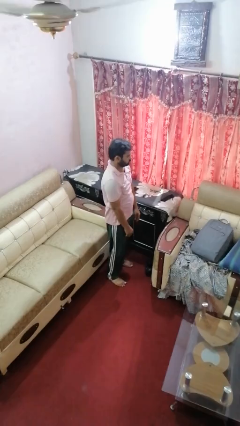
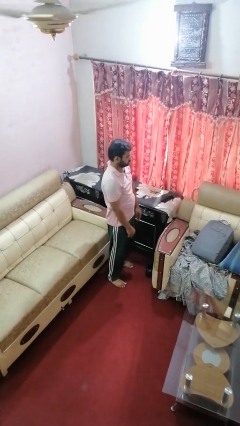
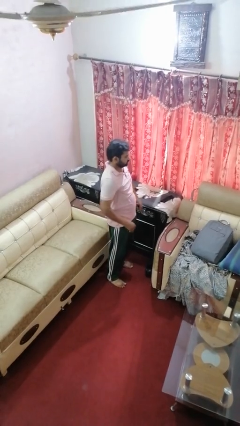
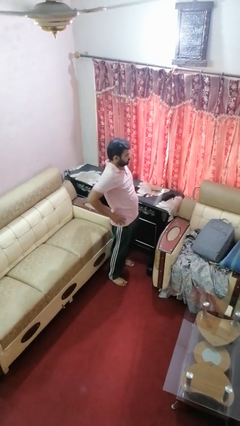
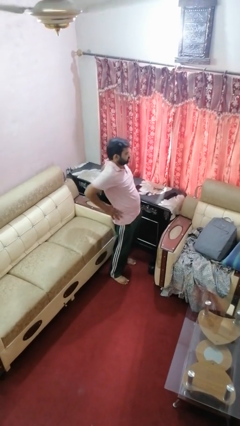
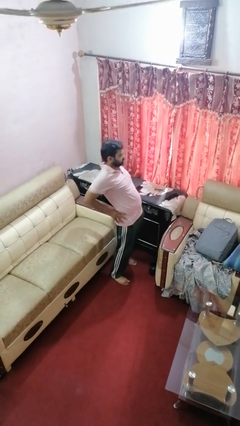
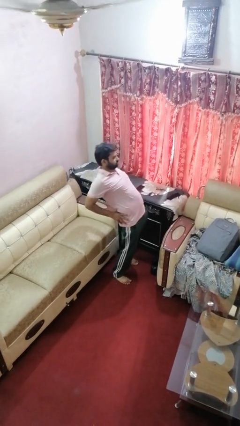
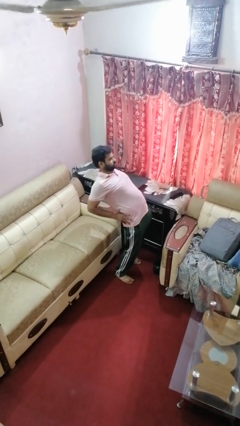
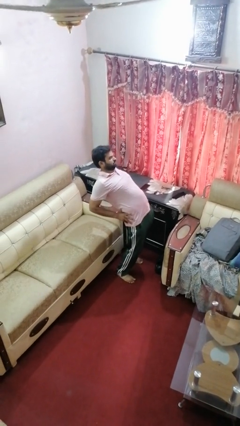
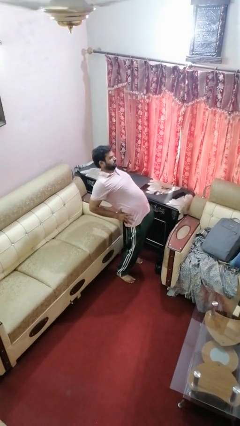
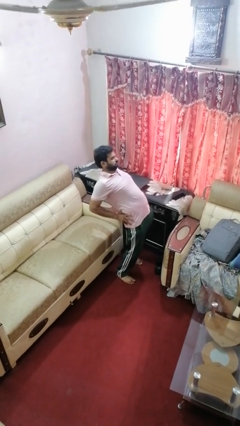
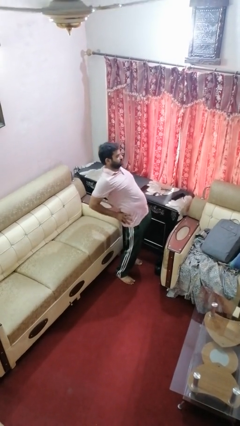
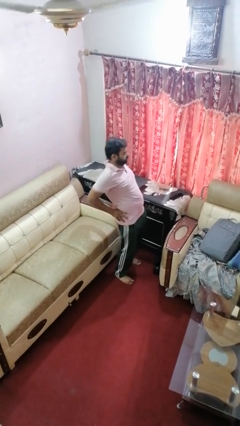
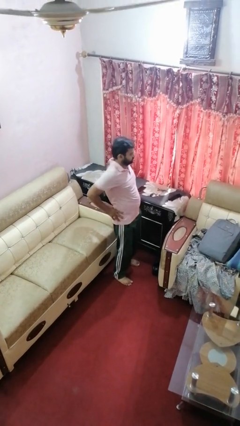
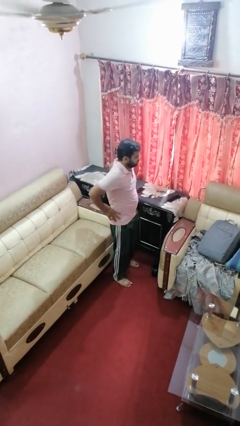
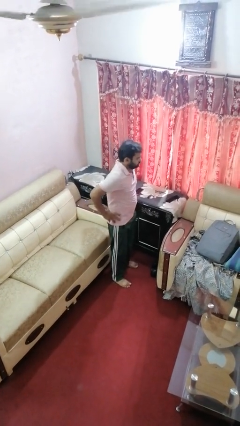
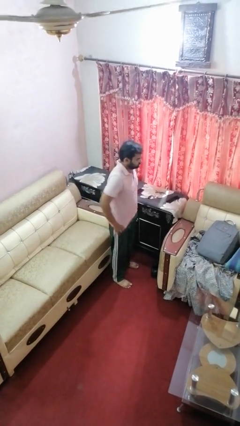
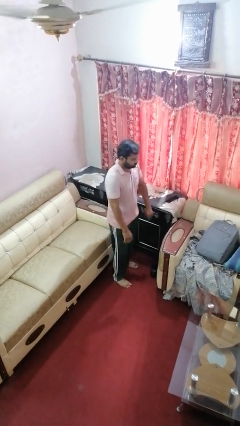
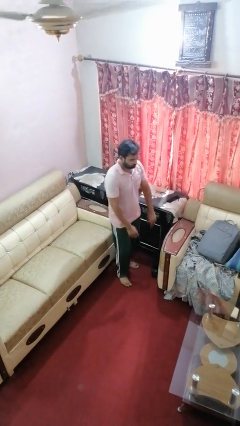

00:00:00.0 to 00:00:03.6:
person stretches back

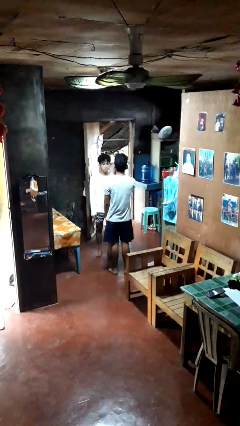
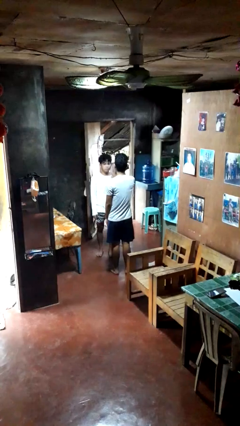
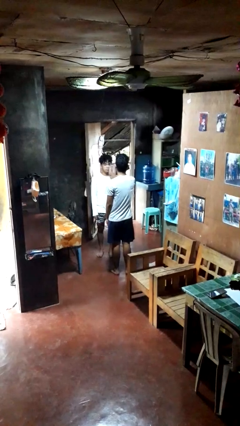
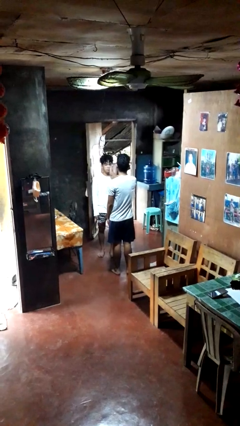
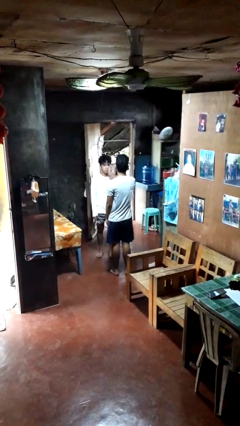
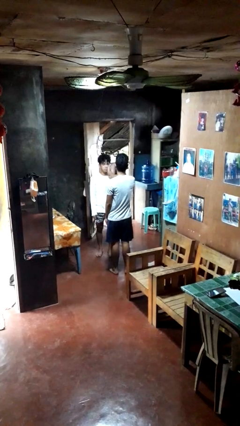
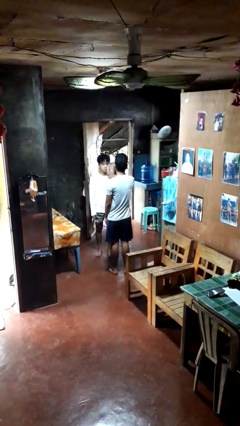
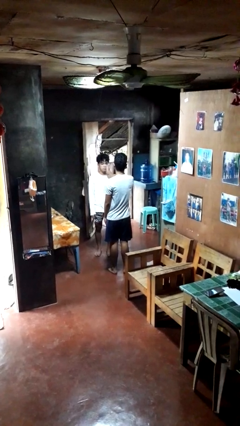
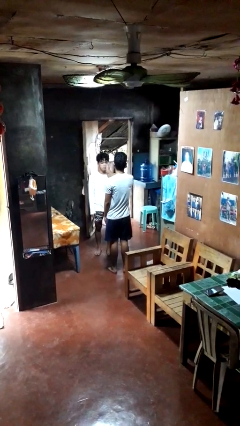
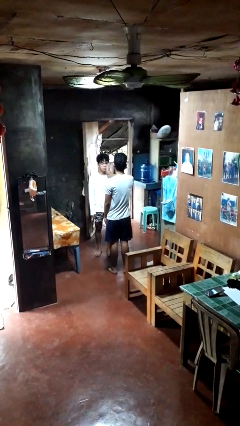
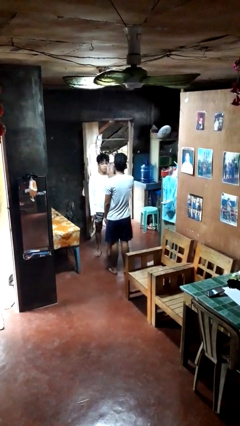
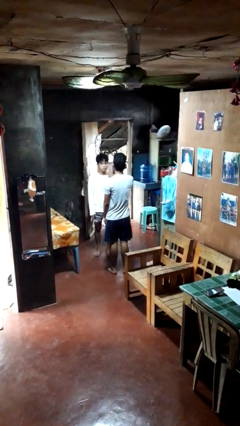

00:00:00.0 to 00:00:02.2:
person touches face of person

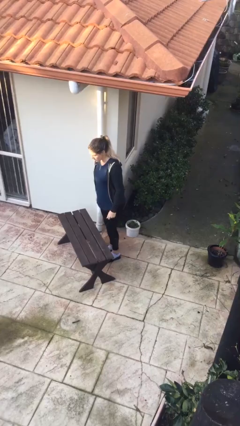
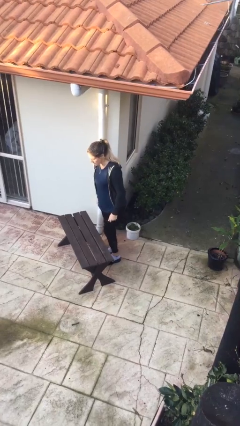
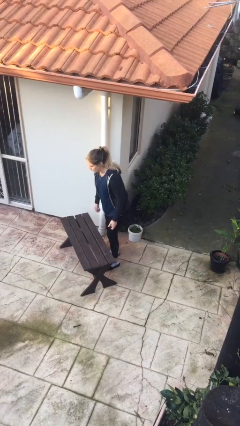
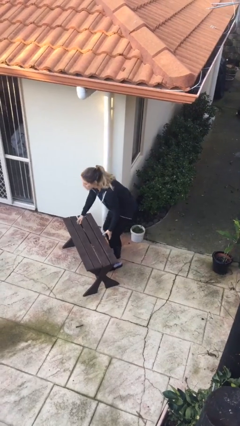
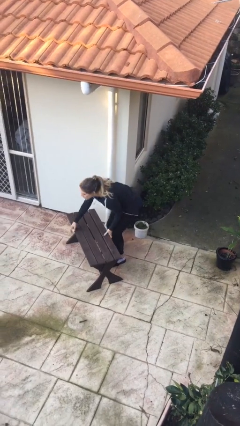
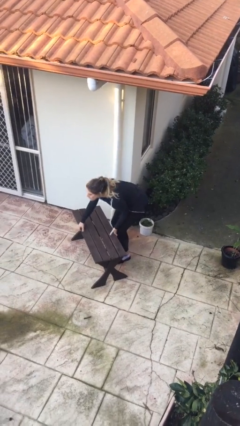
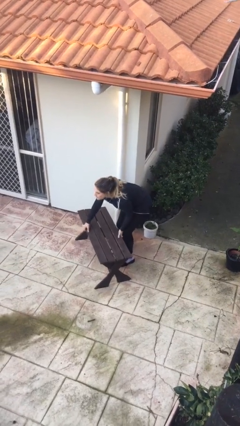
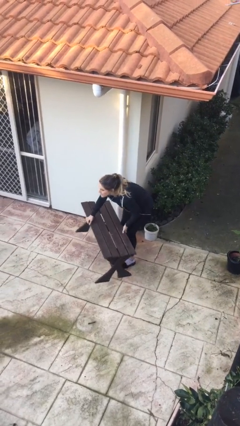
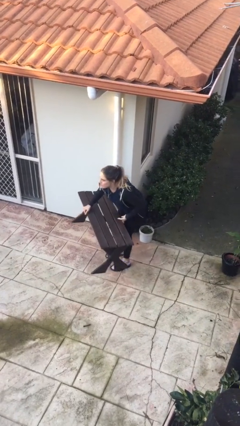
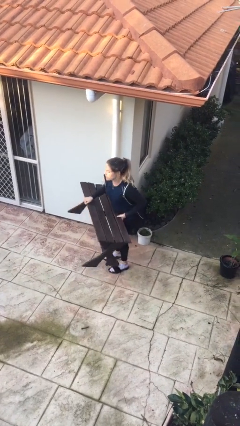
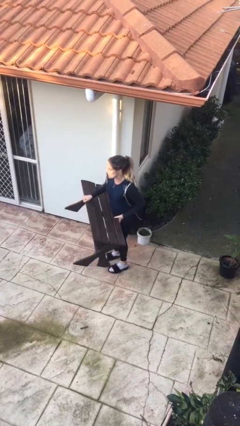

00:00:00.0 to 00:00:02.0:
person picks up object from floor

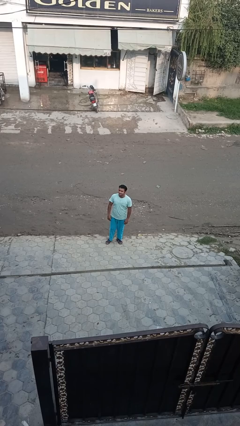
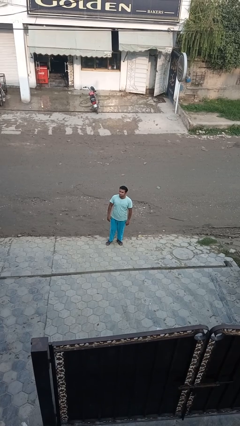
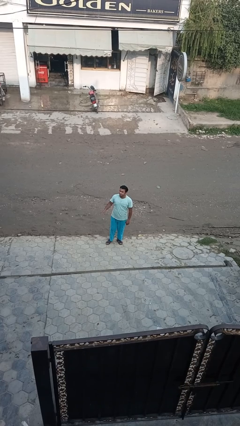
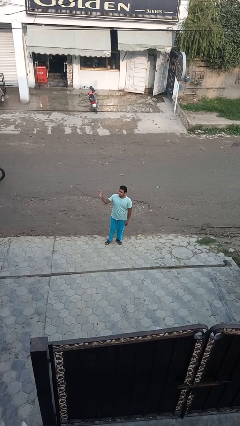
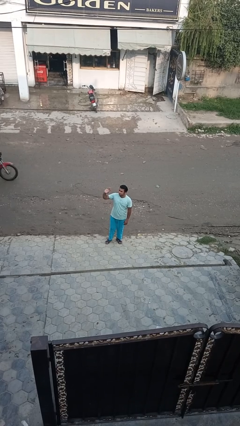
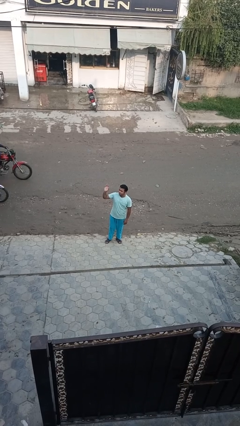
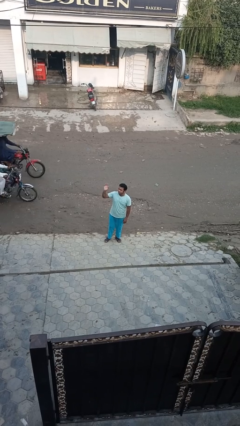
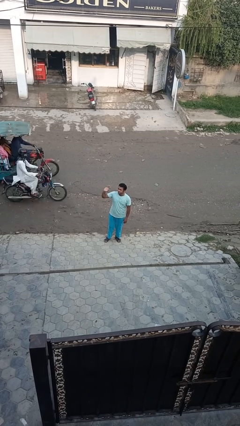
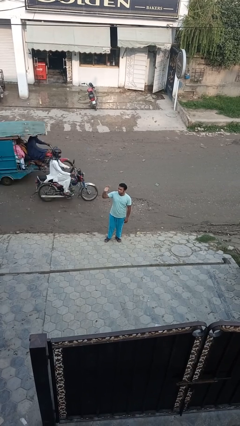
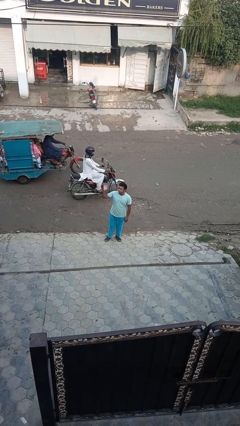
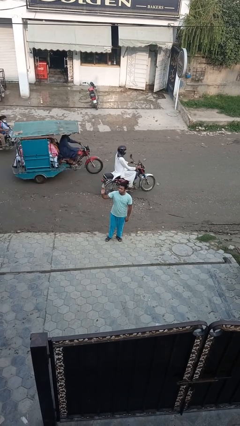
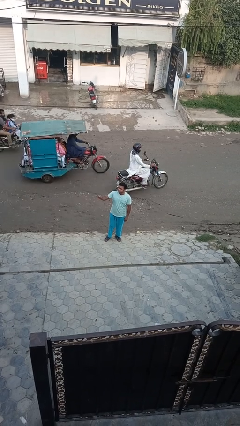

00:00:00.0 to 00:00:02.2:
person waves at person

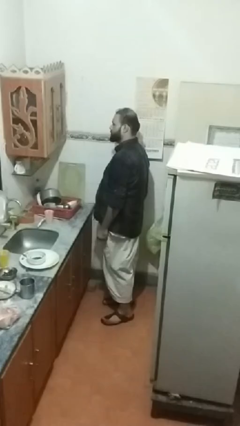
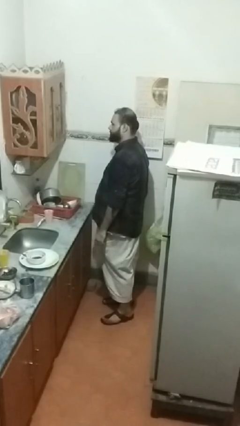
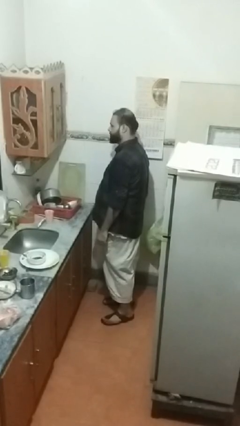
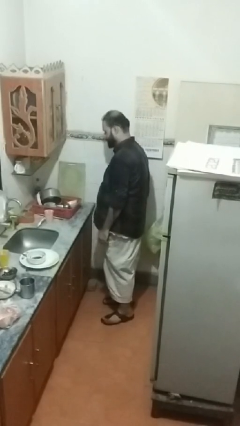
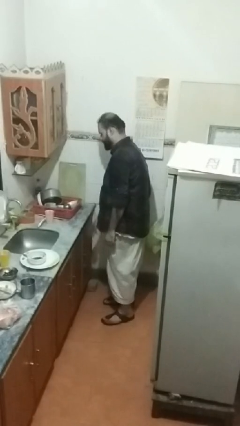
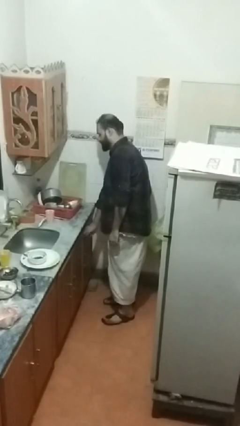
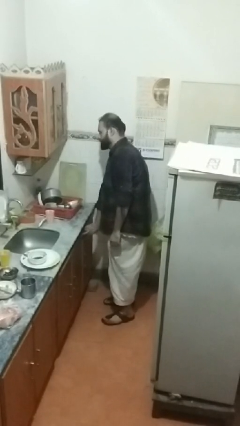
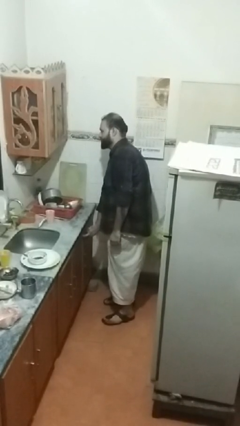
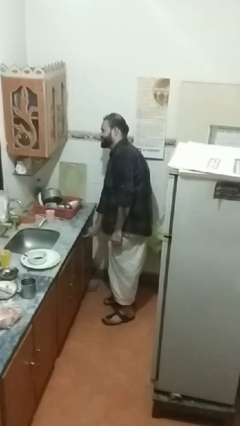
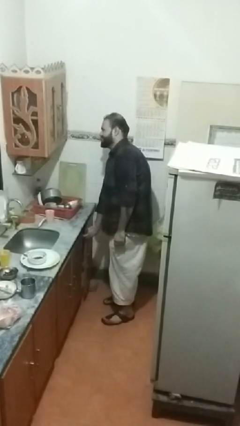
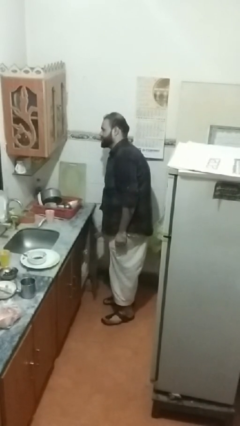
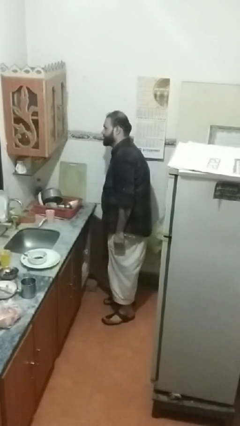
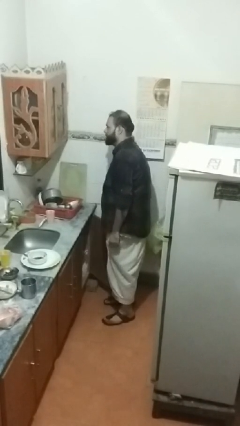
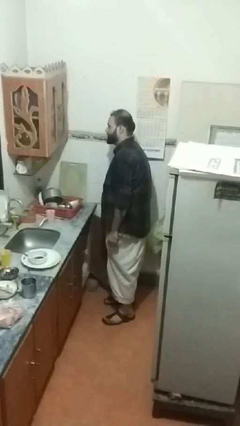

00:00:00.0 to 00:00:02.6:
person opens cabinet

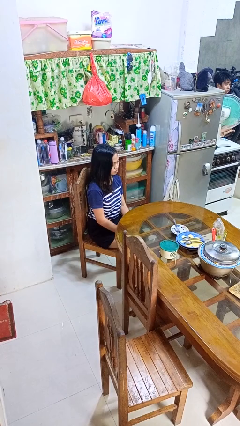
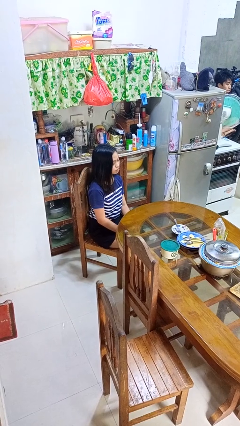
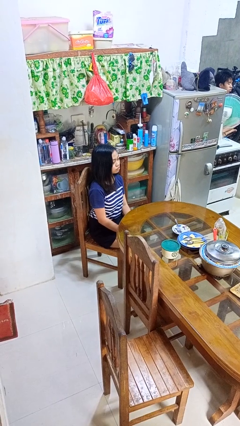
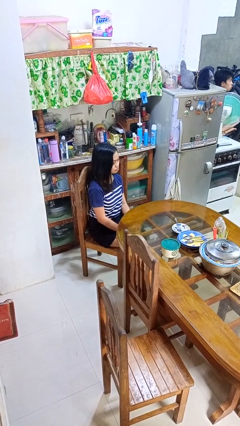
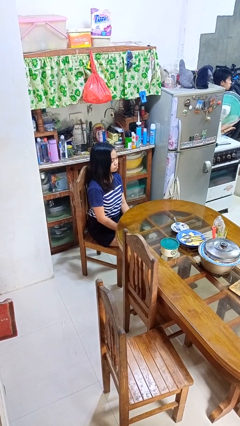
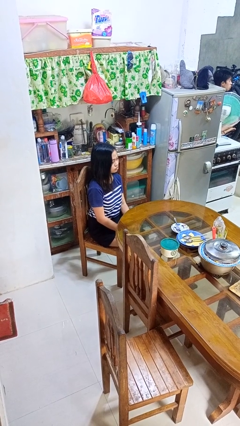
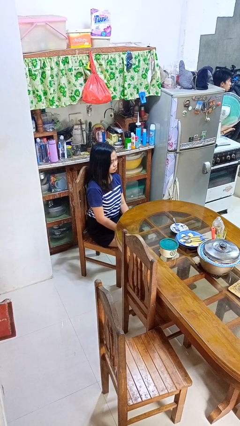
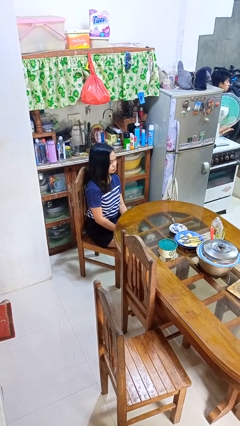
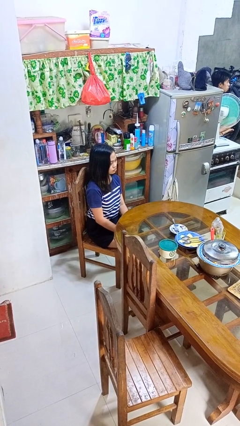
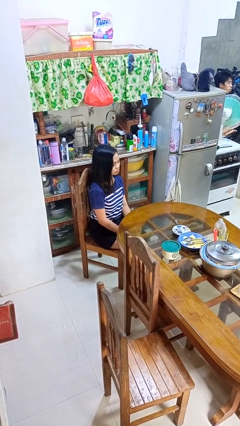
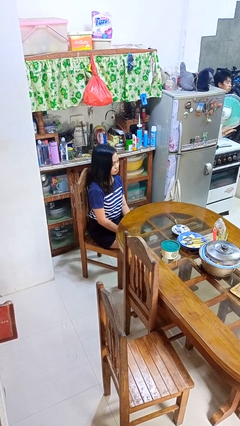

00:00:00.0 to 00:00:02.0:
person nods head

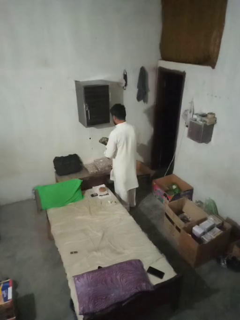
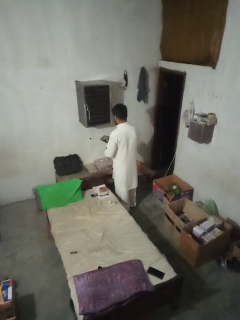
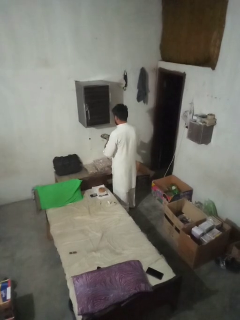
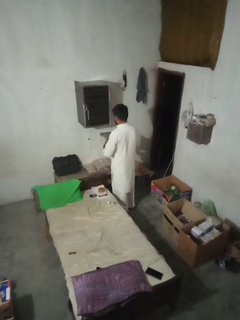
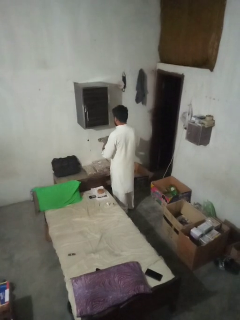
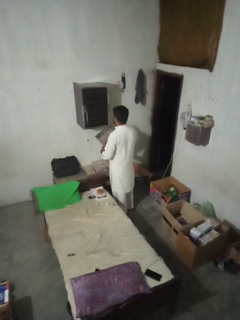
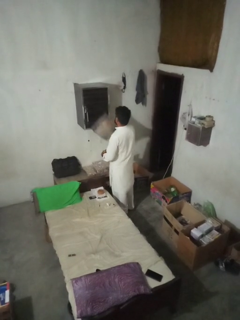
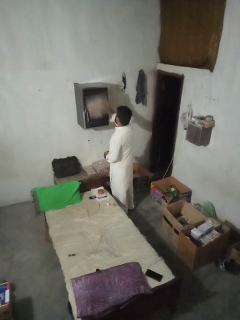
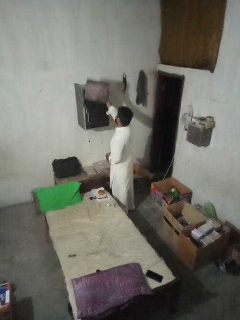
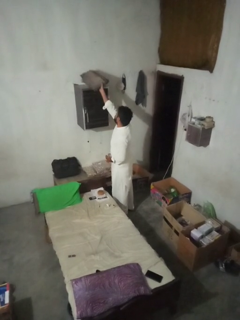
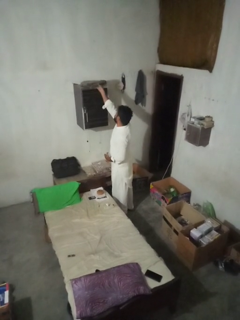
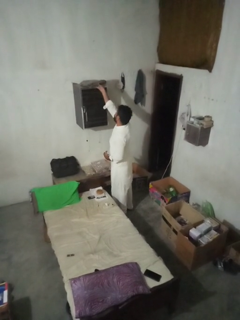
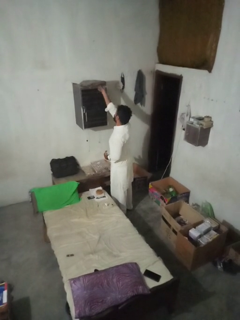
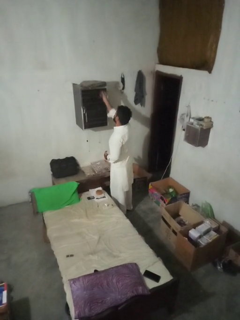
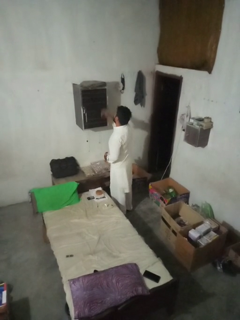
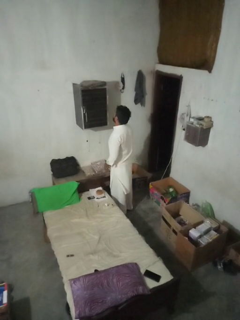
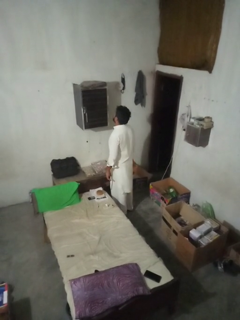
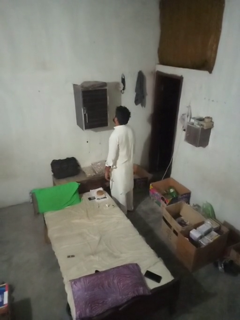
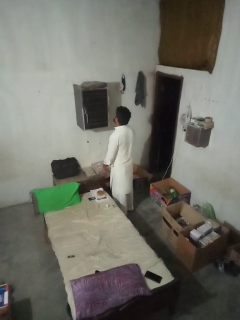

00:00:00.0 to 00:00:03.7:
person puts down object on shelf
